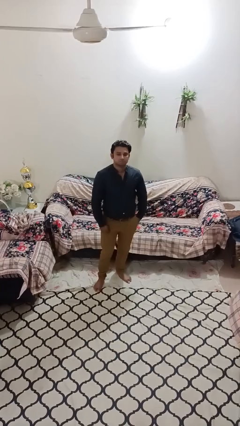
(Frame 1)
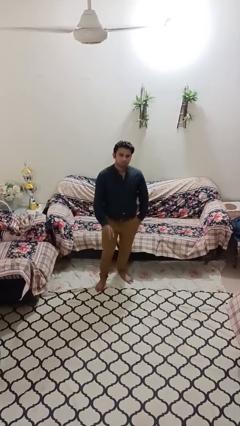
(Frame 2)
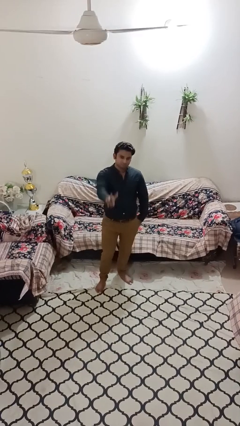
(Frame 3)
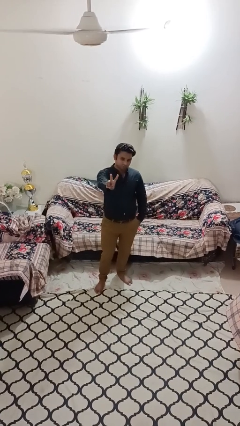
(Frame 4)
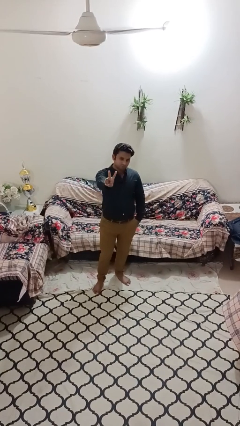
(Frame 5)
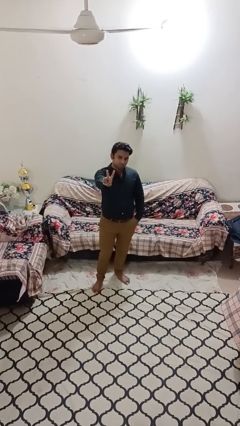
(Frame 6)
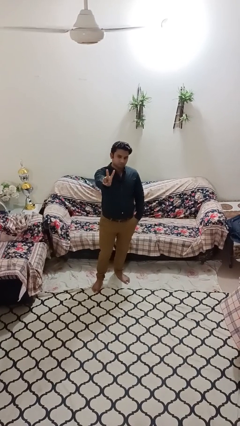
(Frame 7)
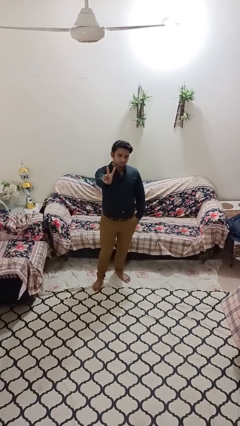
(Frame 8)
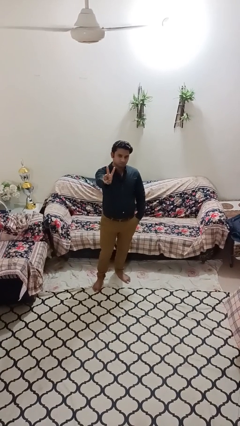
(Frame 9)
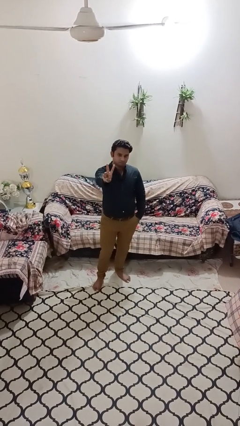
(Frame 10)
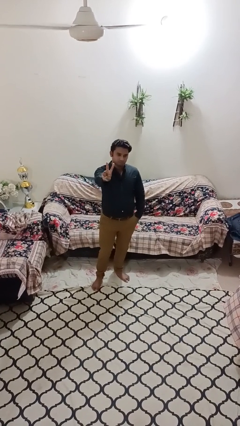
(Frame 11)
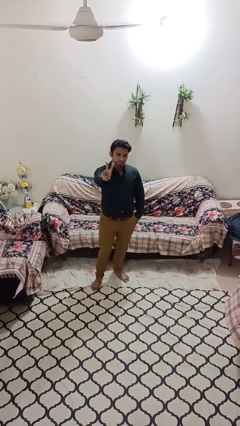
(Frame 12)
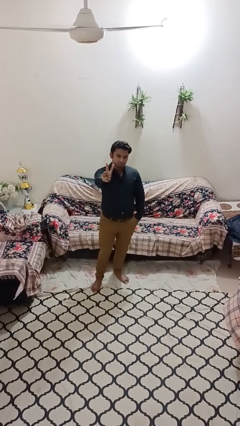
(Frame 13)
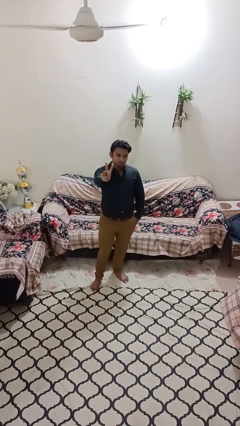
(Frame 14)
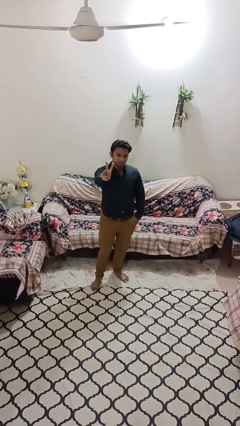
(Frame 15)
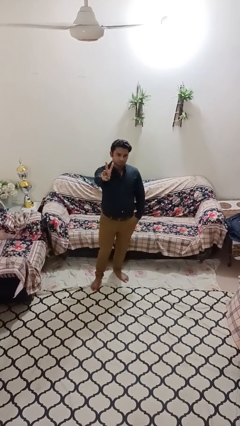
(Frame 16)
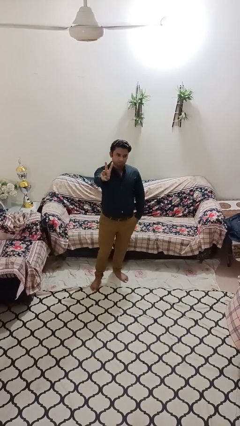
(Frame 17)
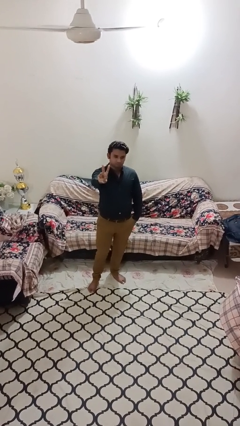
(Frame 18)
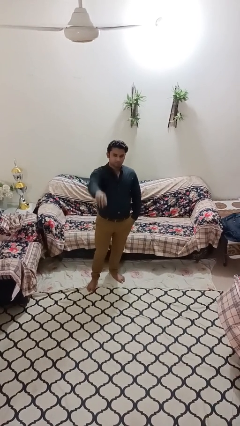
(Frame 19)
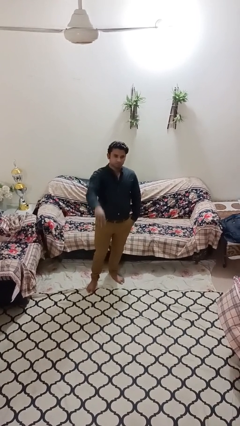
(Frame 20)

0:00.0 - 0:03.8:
person gestures peace

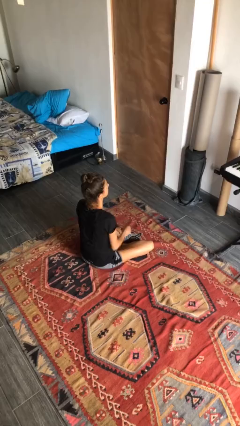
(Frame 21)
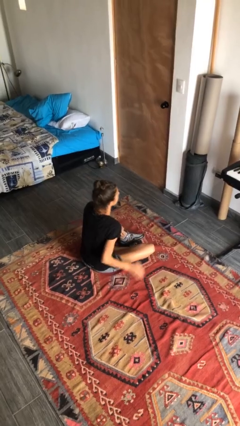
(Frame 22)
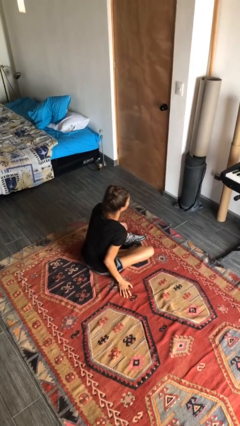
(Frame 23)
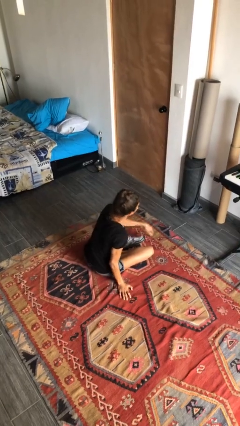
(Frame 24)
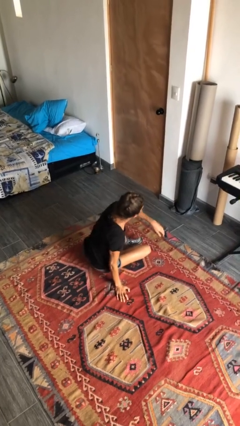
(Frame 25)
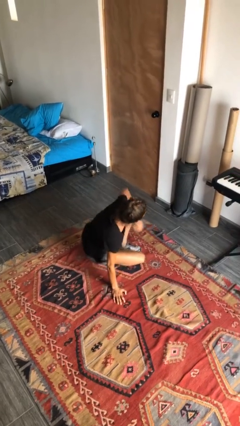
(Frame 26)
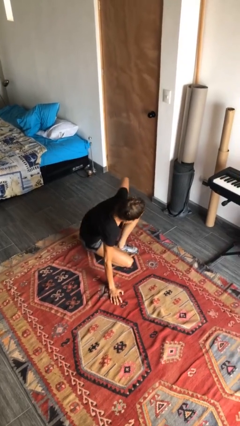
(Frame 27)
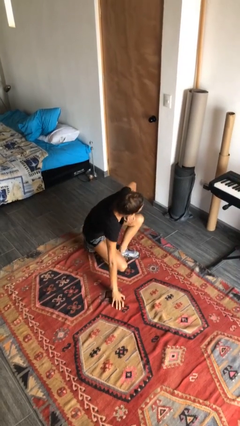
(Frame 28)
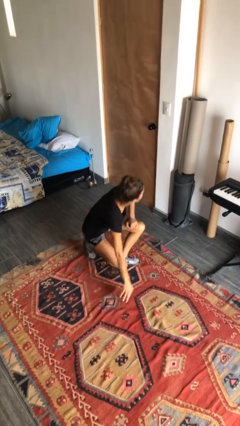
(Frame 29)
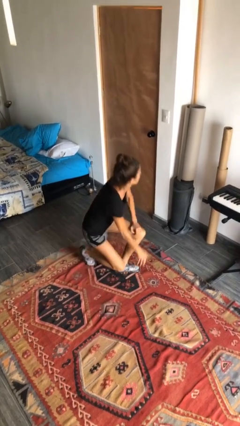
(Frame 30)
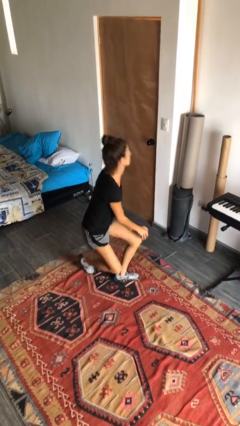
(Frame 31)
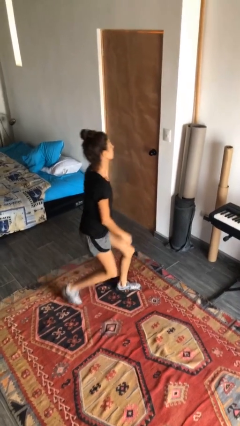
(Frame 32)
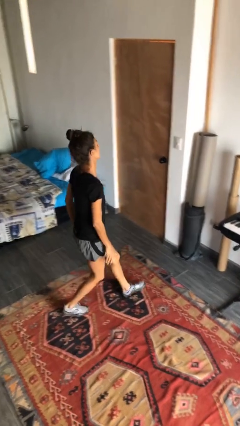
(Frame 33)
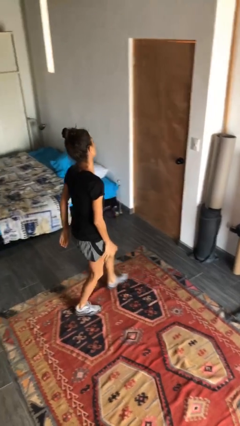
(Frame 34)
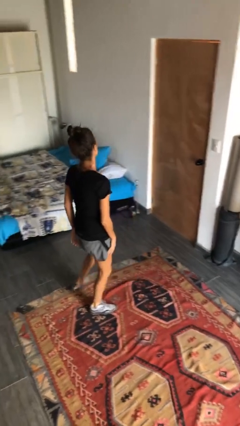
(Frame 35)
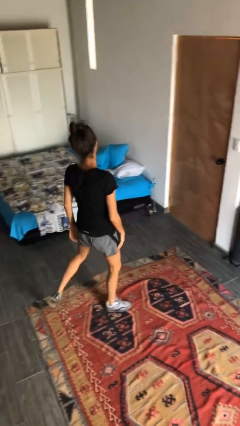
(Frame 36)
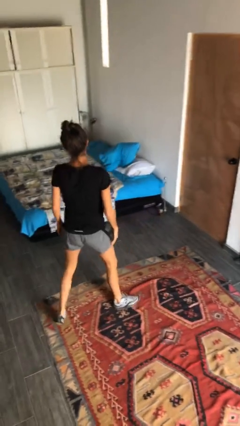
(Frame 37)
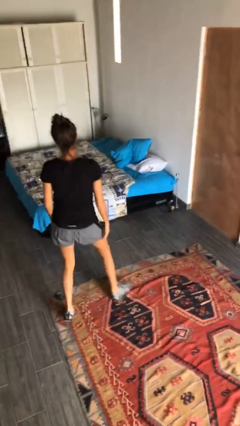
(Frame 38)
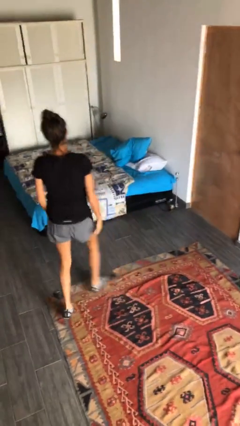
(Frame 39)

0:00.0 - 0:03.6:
person stands up from floor

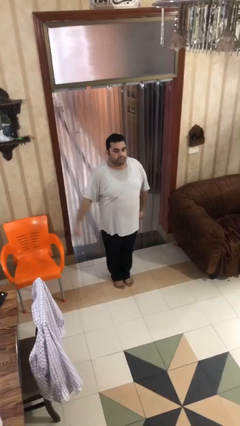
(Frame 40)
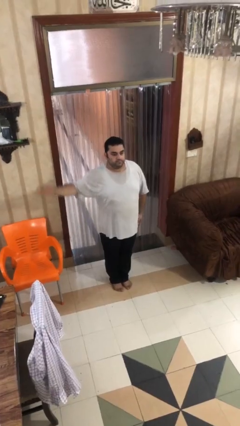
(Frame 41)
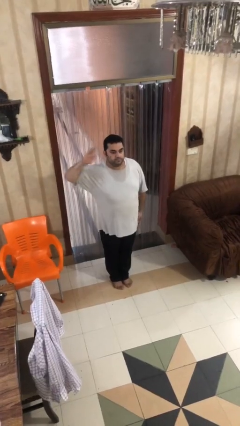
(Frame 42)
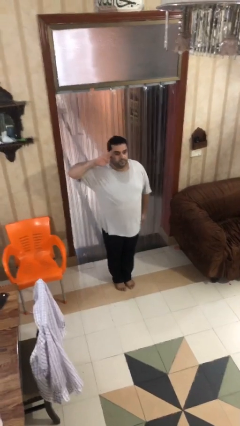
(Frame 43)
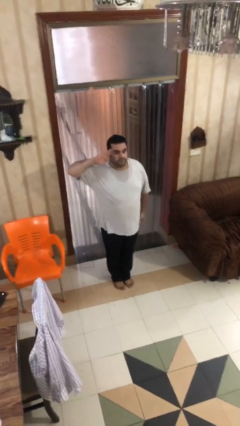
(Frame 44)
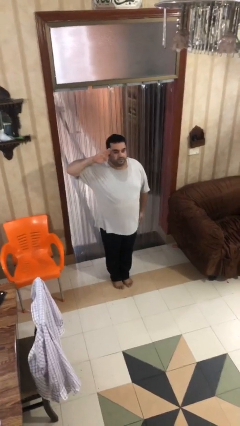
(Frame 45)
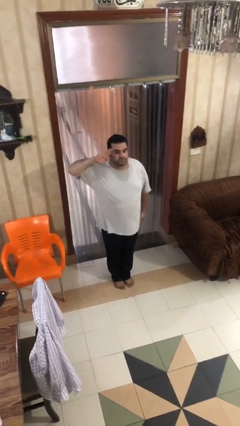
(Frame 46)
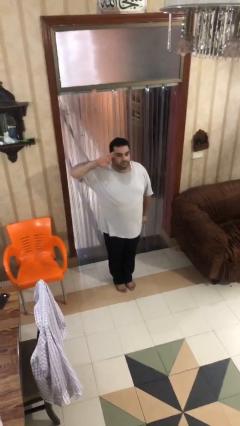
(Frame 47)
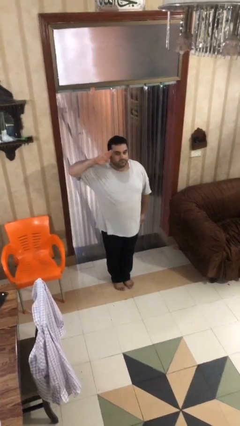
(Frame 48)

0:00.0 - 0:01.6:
person salutes

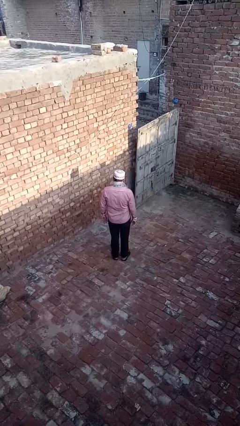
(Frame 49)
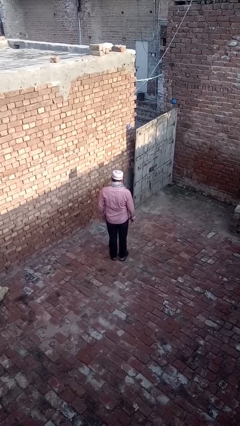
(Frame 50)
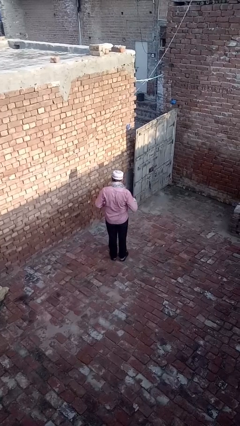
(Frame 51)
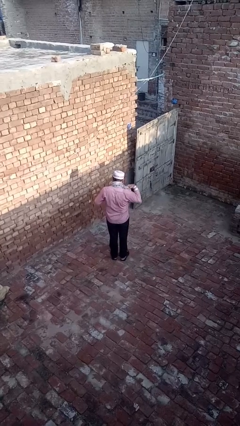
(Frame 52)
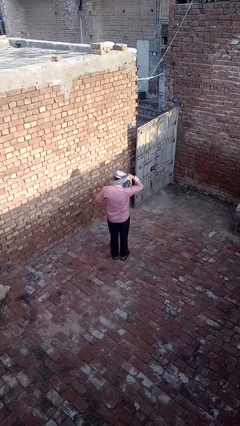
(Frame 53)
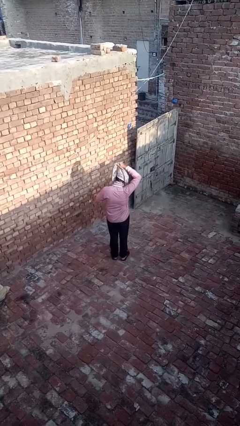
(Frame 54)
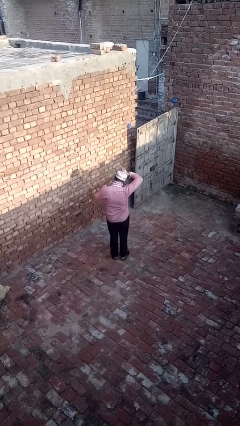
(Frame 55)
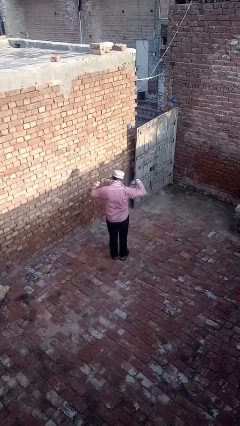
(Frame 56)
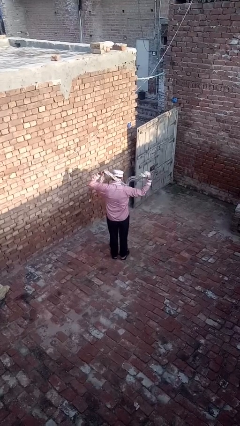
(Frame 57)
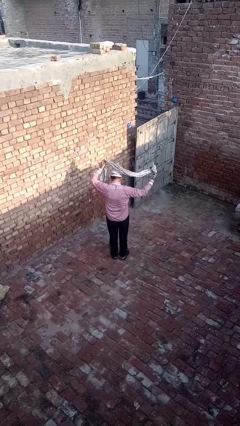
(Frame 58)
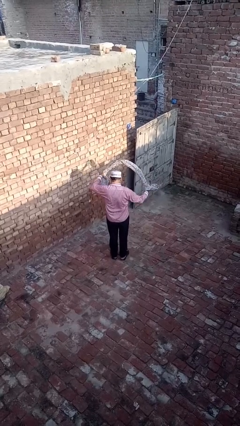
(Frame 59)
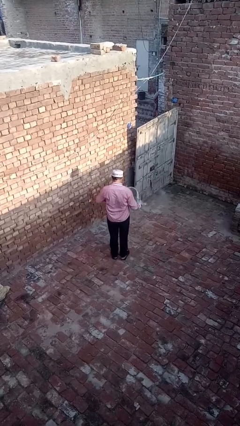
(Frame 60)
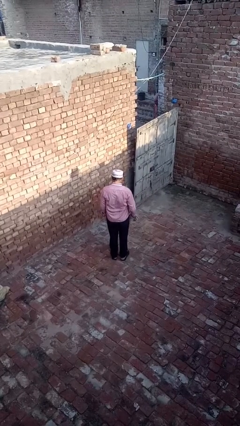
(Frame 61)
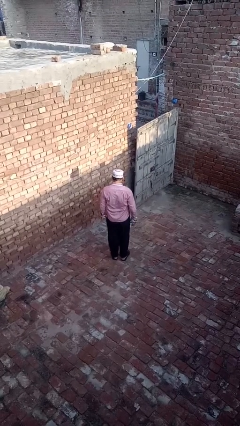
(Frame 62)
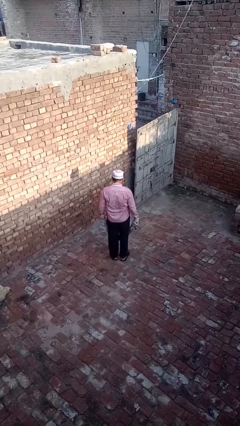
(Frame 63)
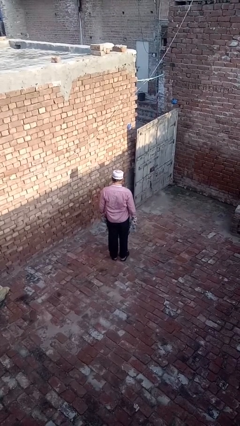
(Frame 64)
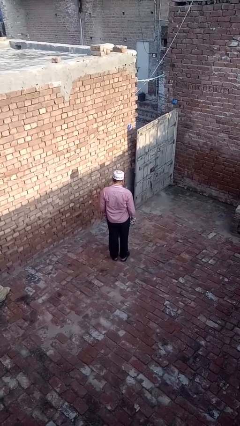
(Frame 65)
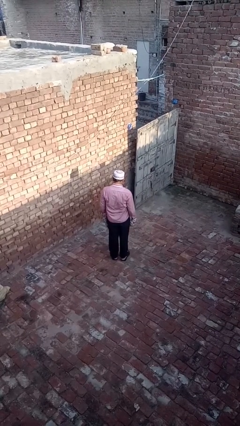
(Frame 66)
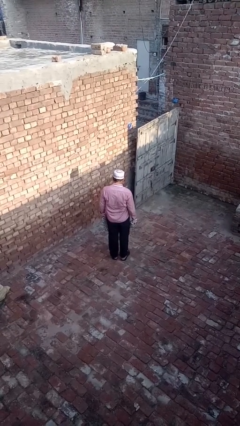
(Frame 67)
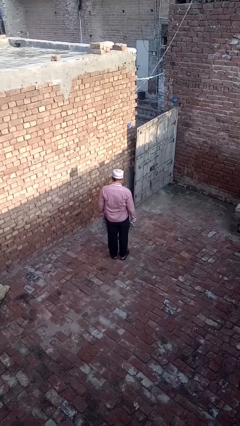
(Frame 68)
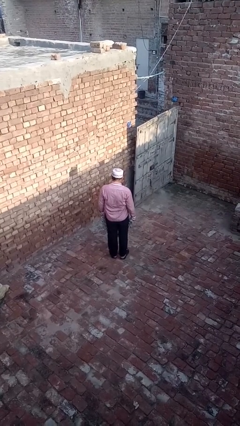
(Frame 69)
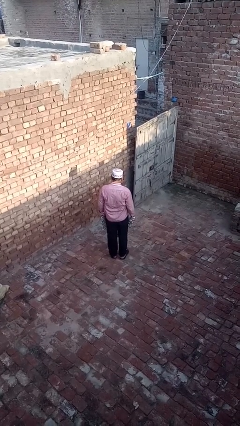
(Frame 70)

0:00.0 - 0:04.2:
person takes off scarf

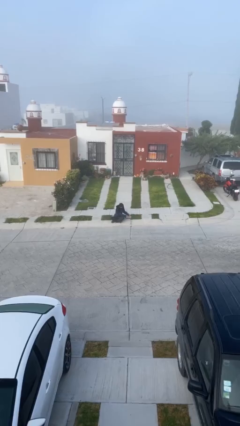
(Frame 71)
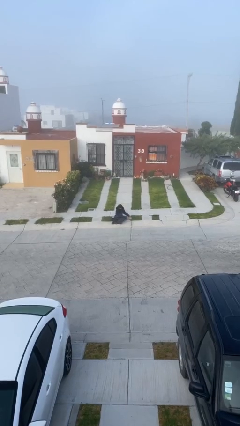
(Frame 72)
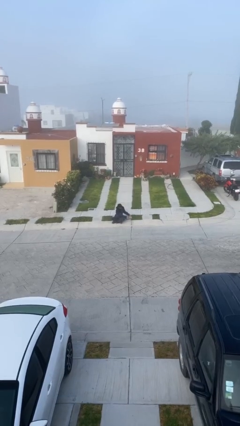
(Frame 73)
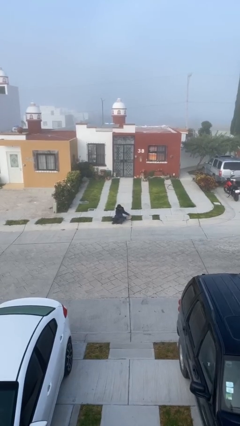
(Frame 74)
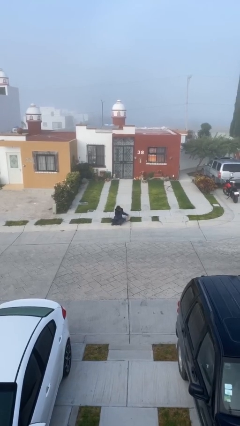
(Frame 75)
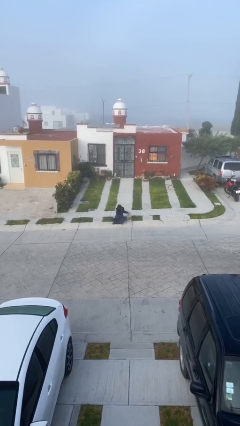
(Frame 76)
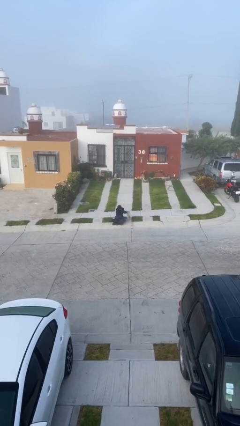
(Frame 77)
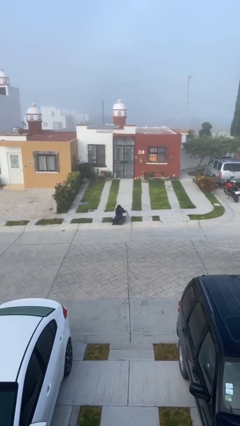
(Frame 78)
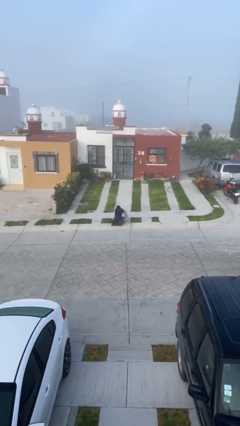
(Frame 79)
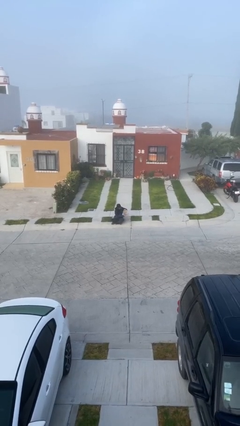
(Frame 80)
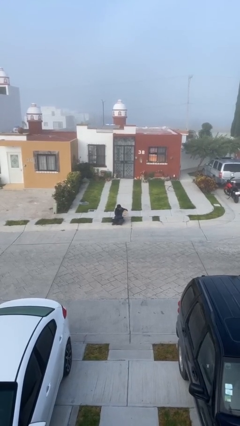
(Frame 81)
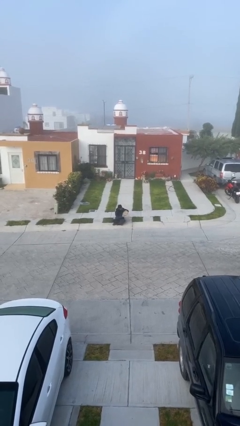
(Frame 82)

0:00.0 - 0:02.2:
person picks up object from floor

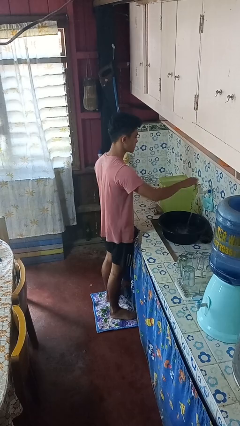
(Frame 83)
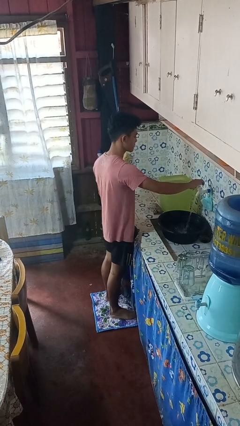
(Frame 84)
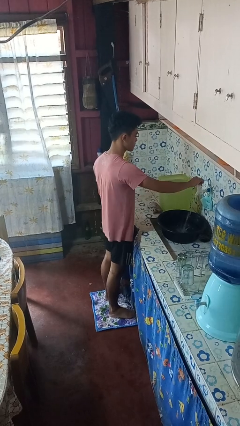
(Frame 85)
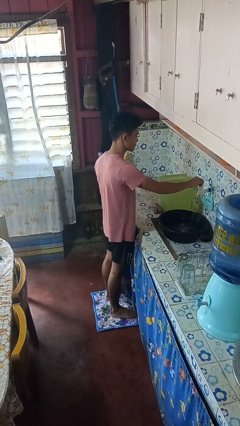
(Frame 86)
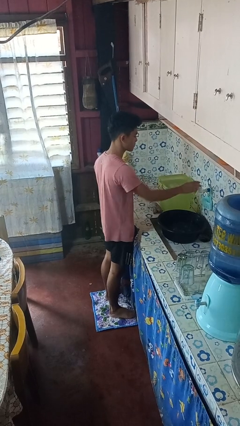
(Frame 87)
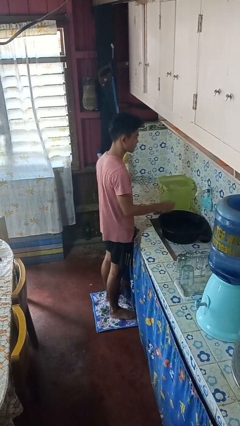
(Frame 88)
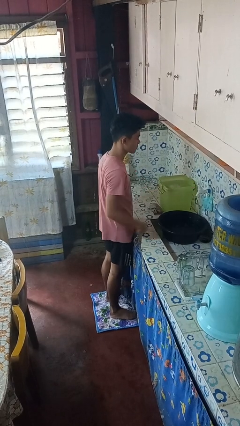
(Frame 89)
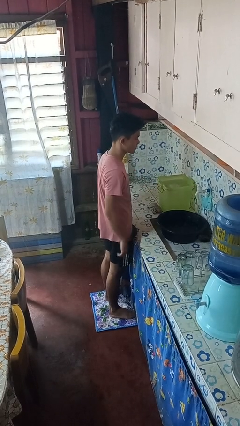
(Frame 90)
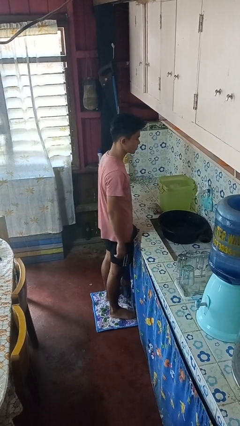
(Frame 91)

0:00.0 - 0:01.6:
person turns off faucet
